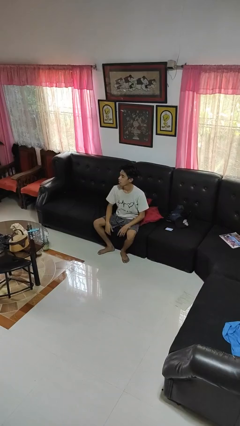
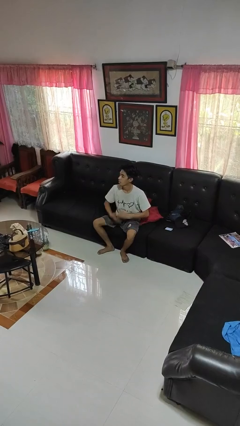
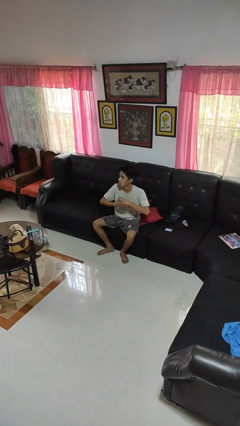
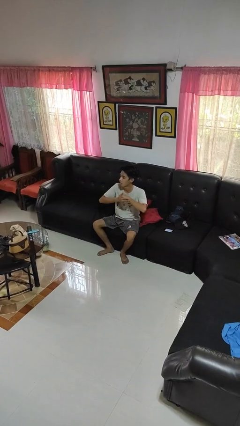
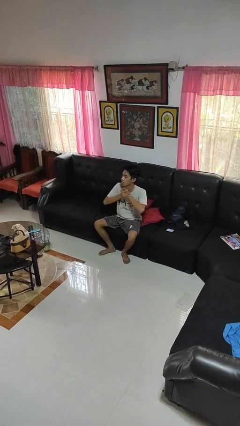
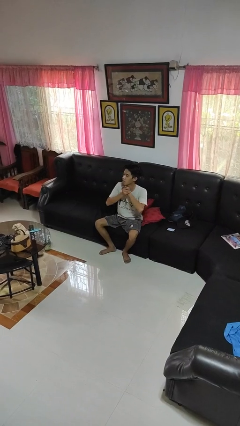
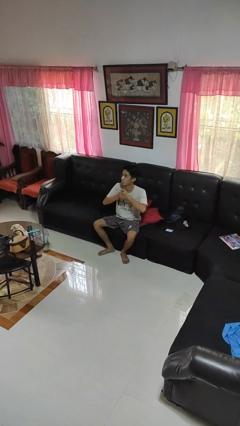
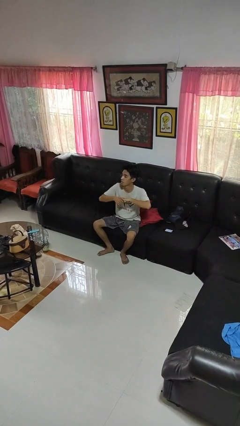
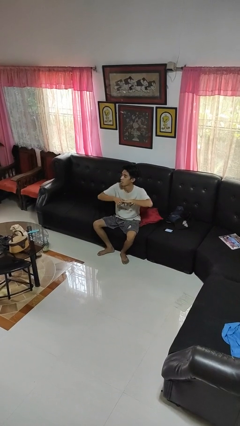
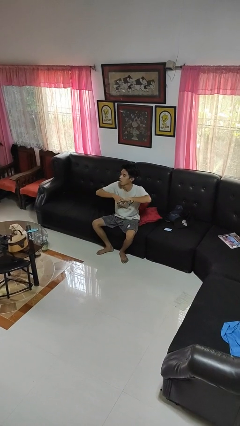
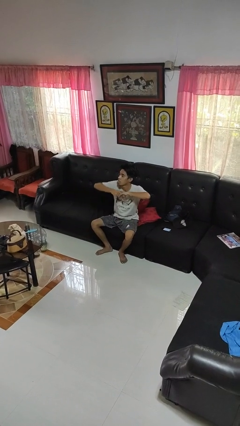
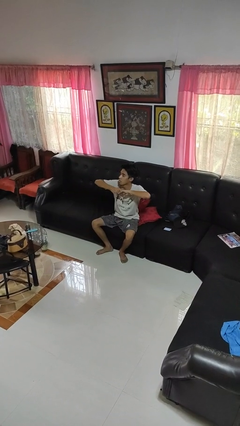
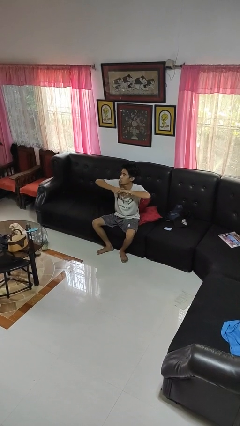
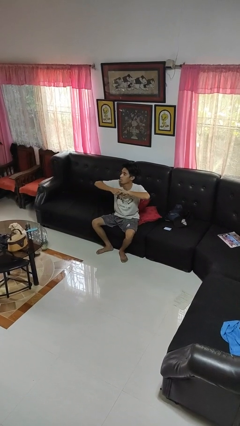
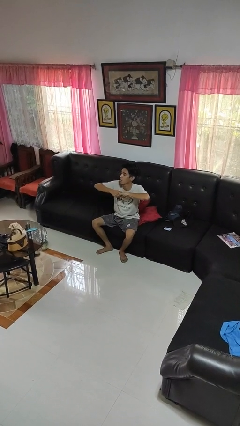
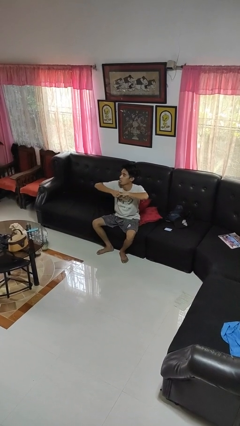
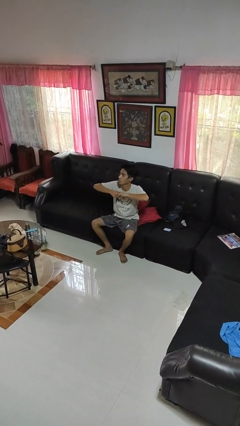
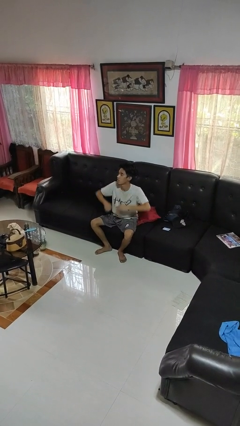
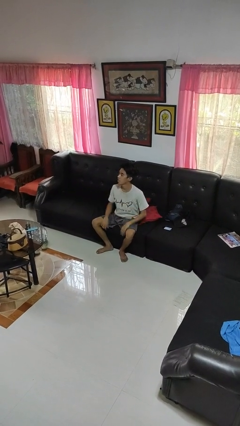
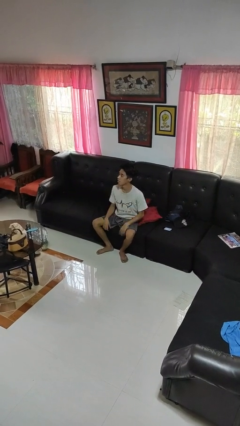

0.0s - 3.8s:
person cracks knuckles

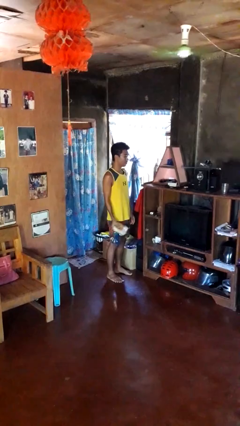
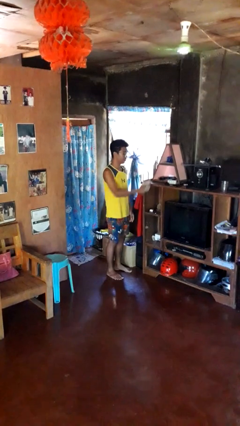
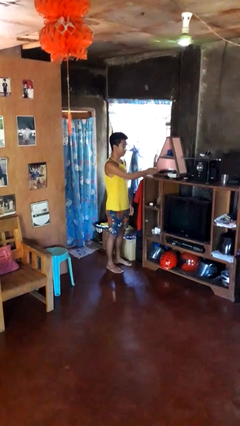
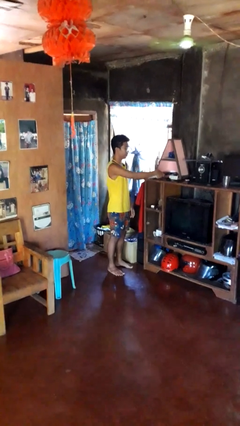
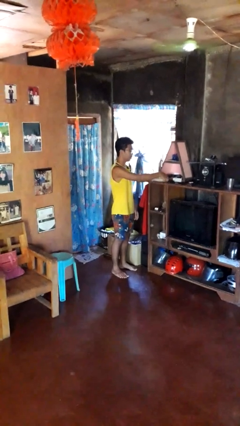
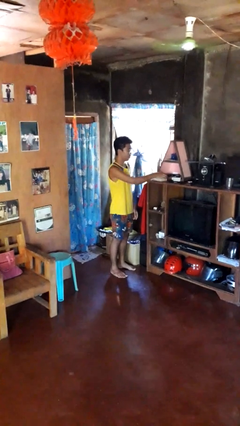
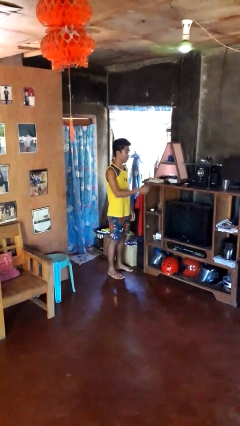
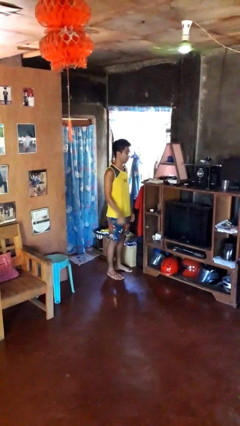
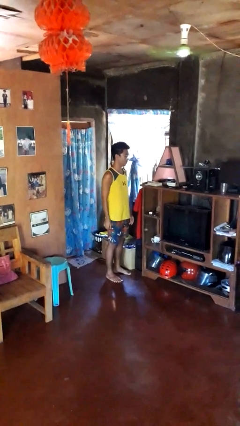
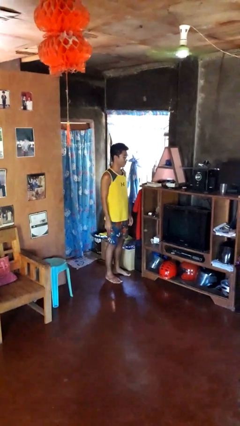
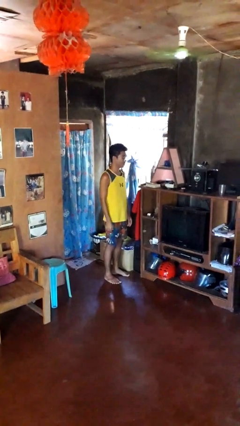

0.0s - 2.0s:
person puts down object on shelf

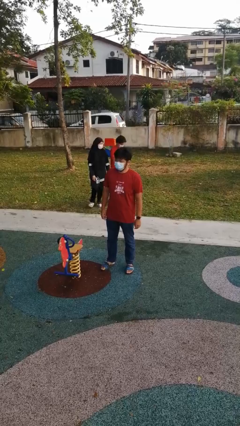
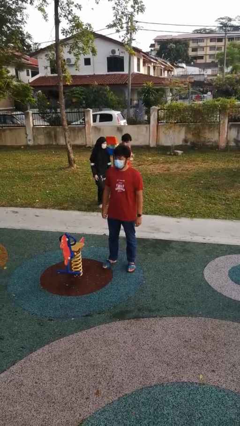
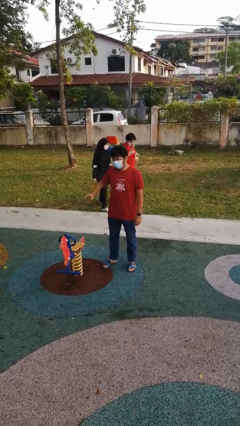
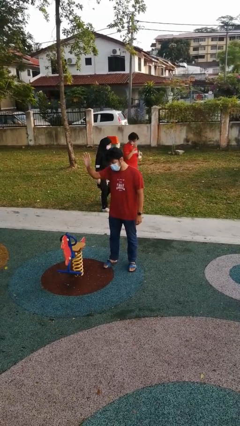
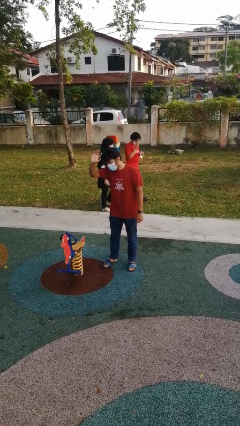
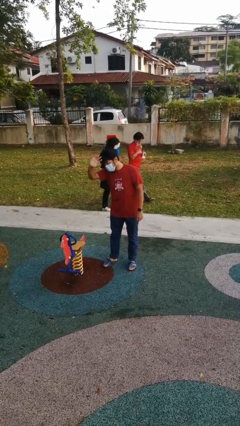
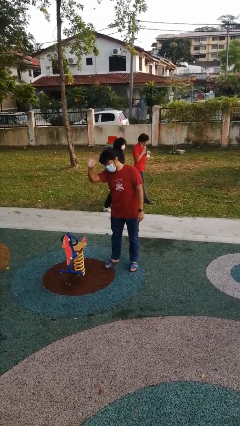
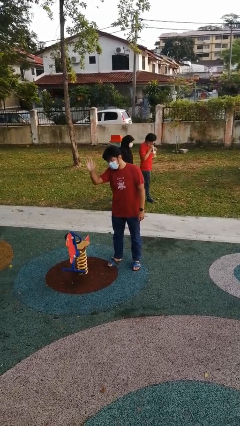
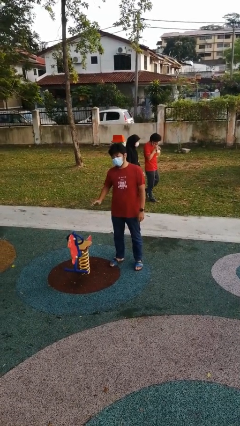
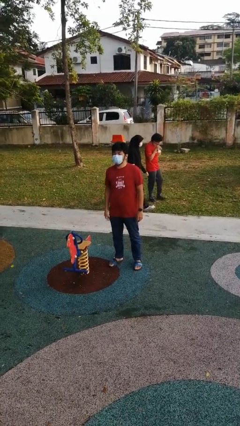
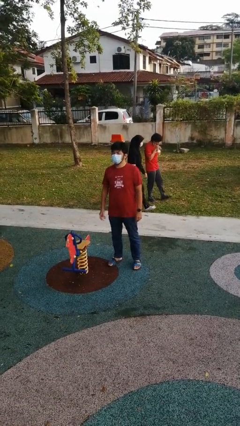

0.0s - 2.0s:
person waves at person

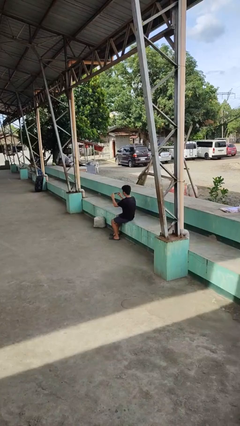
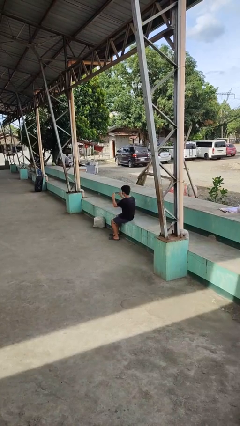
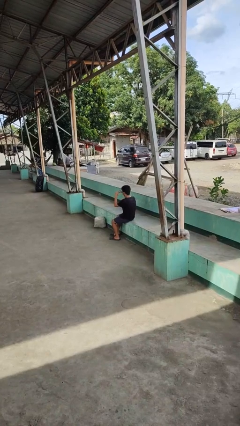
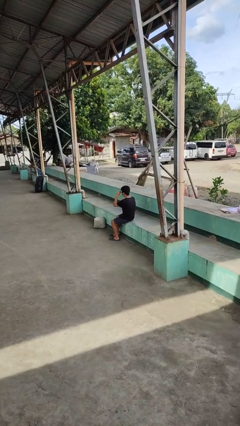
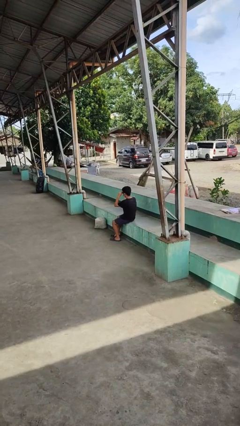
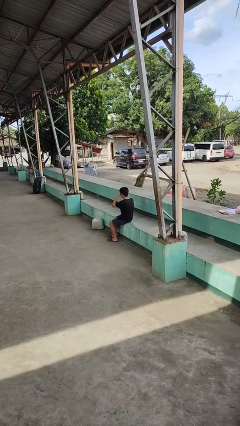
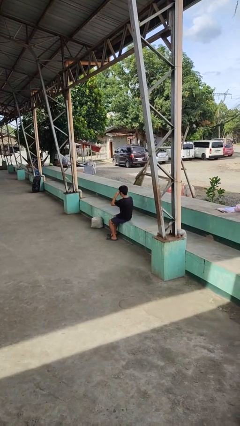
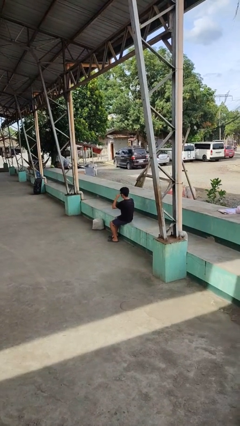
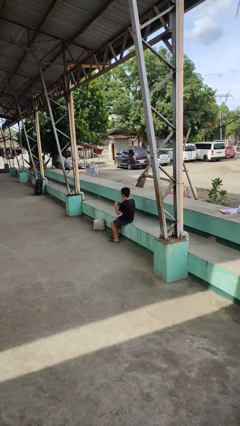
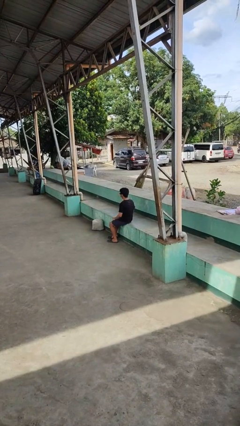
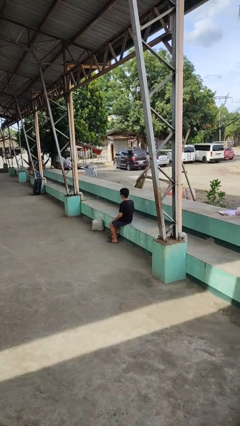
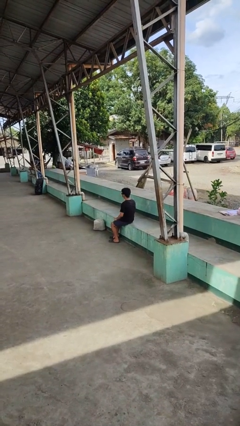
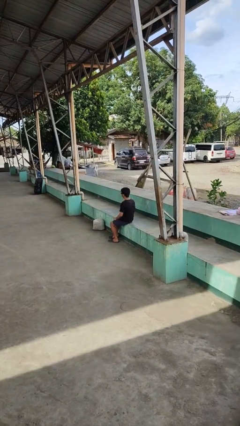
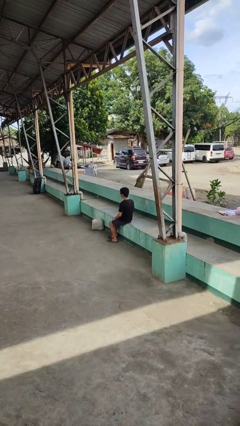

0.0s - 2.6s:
person puts on sunglasses

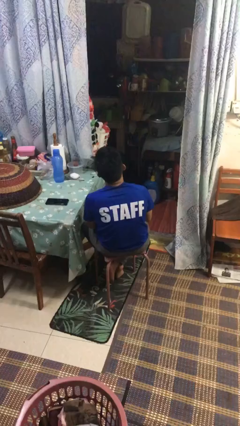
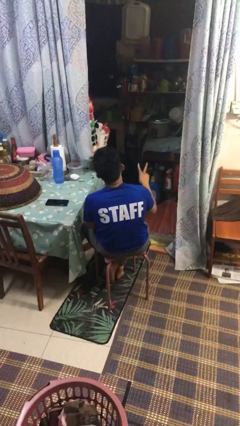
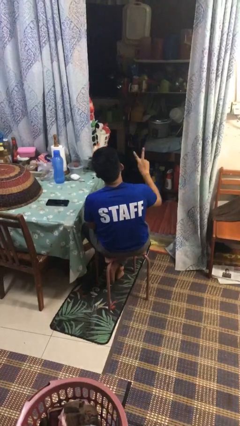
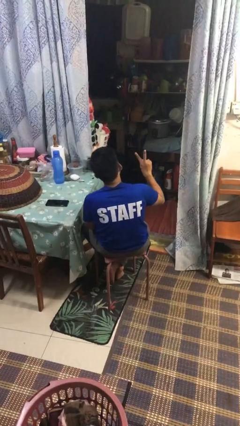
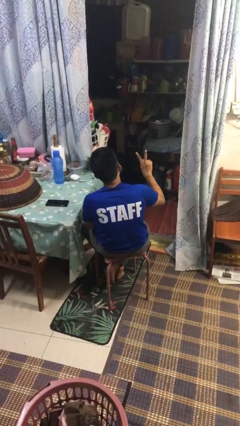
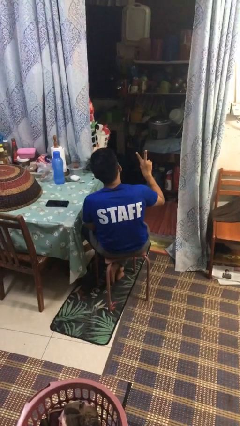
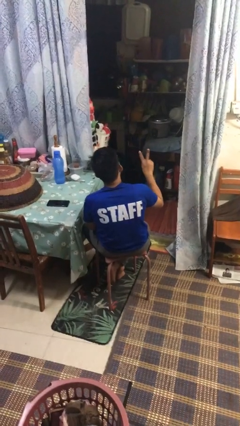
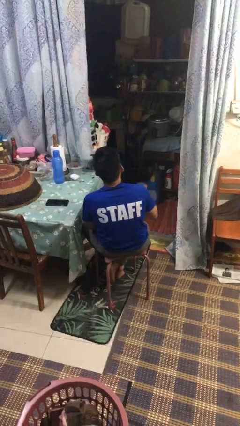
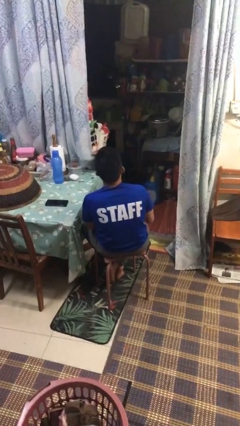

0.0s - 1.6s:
person gestures peace

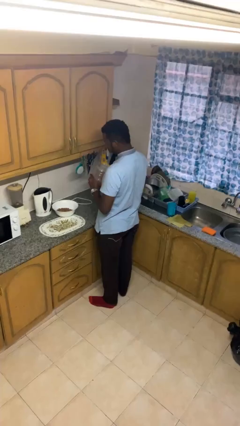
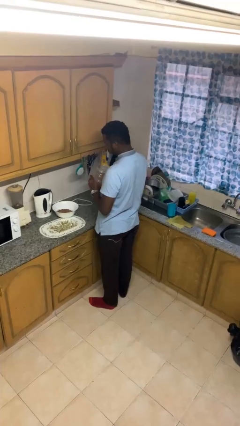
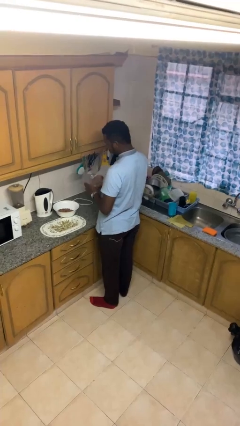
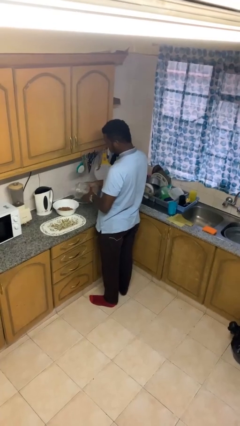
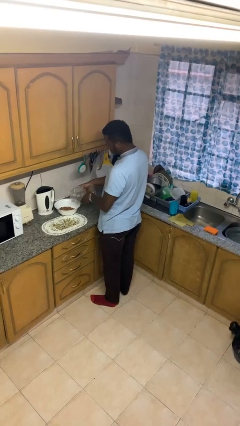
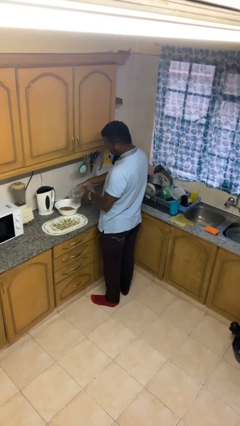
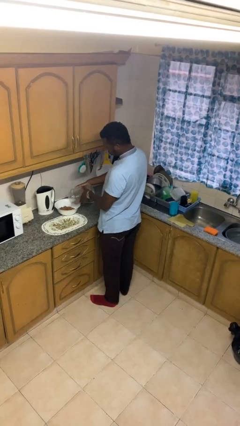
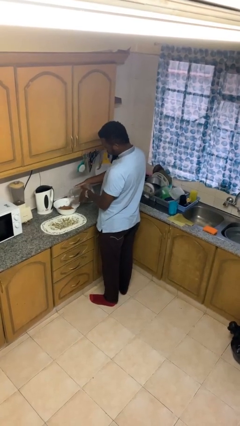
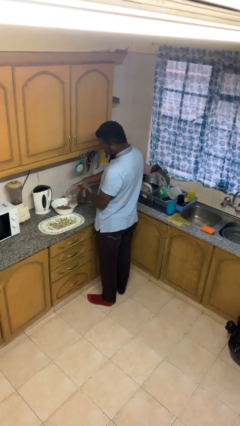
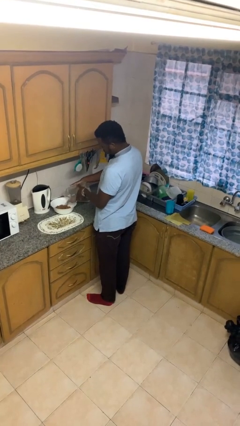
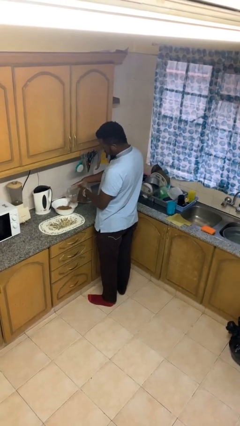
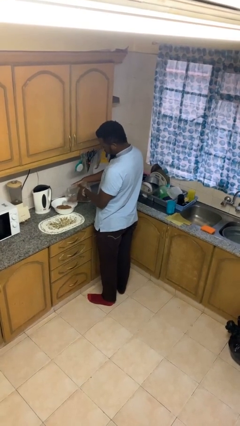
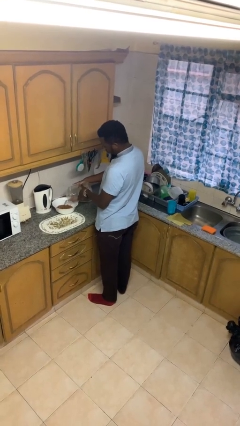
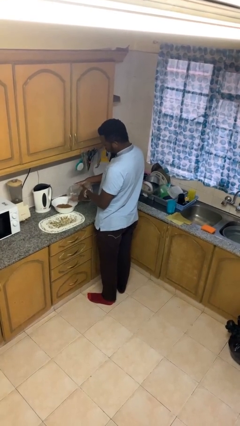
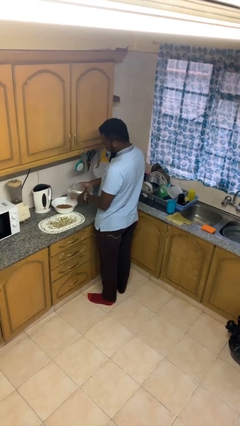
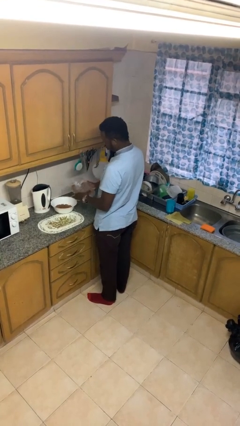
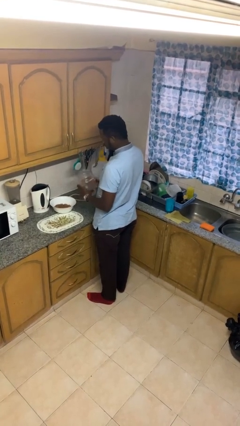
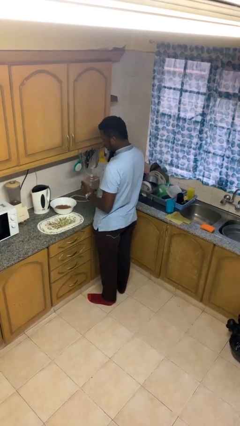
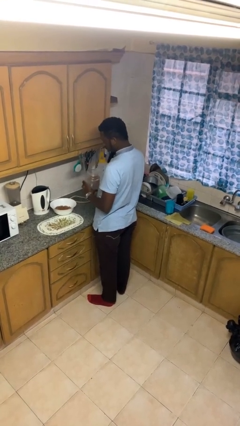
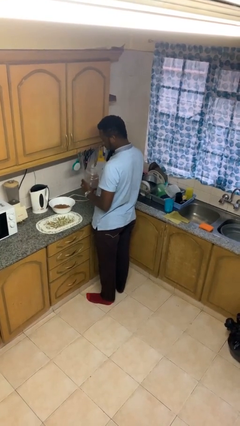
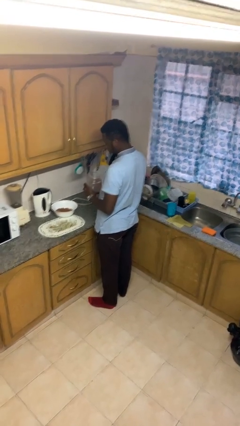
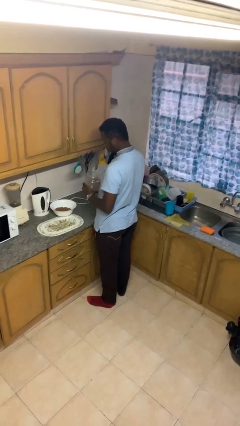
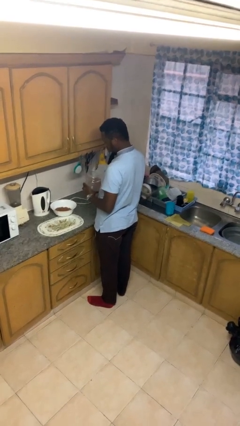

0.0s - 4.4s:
person pours into bowl

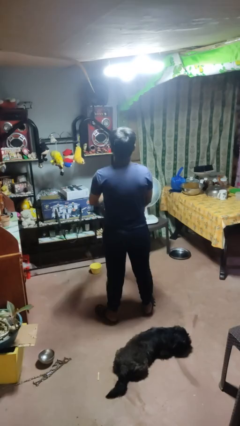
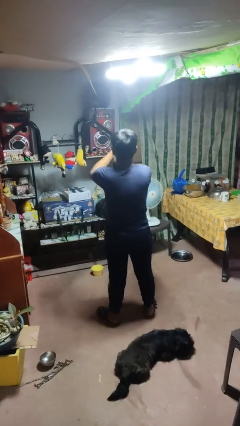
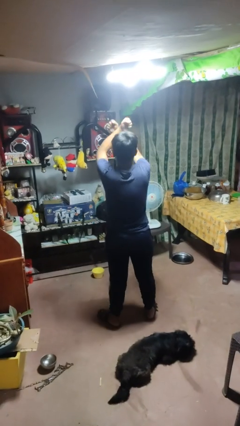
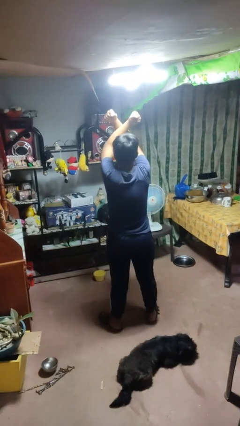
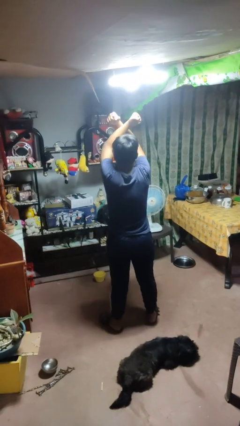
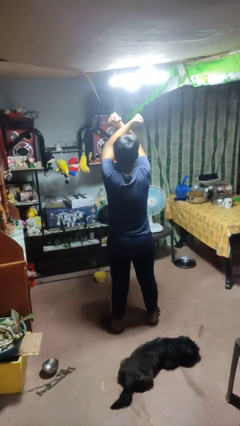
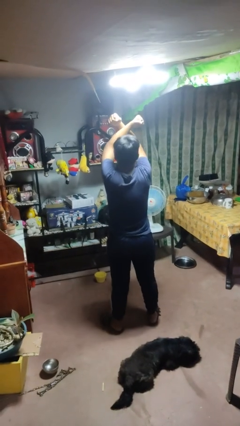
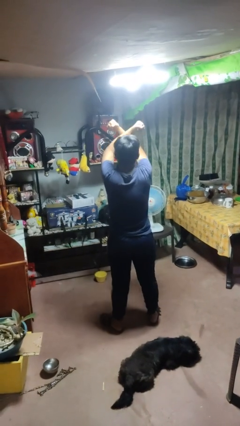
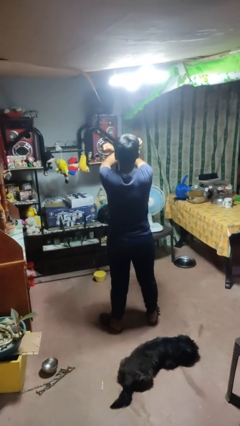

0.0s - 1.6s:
person gestures arms x
